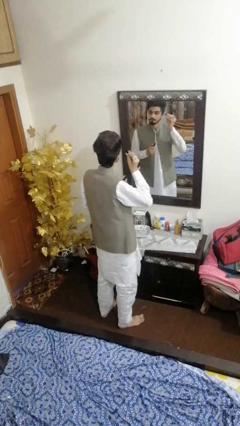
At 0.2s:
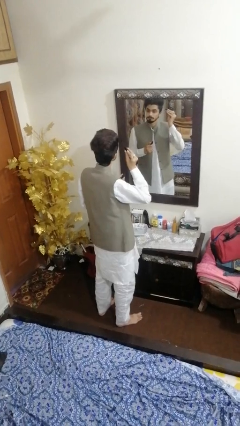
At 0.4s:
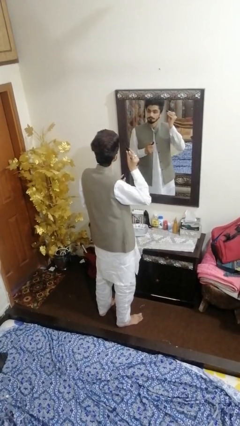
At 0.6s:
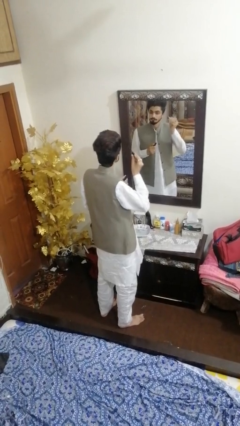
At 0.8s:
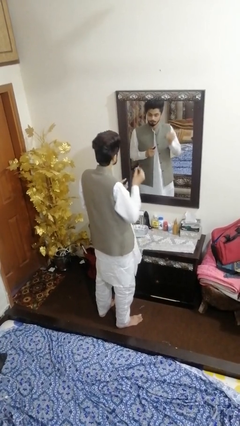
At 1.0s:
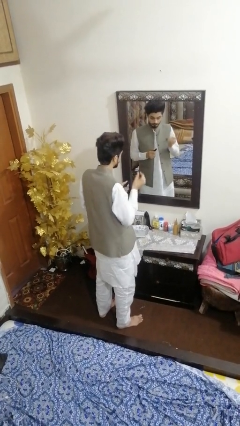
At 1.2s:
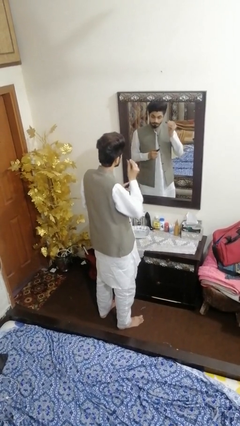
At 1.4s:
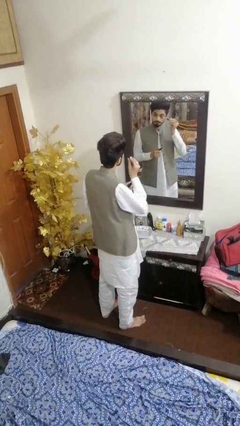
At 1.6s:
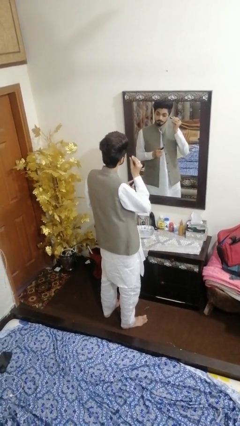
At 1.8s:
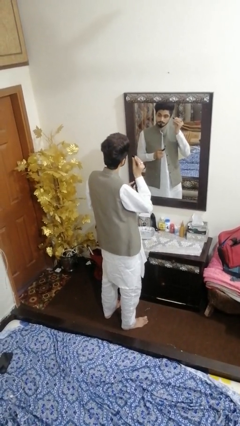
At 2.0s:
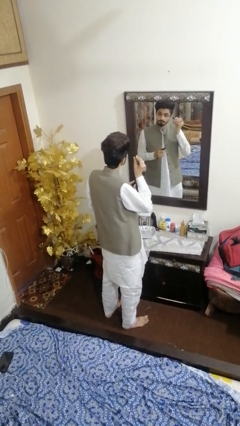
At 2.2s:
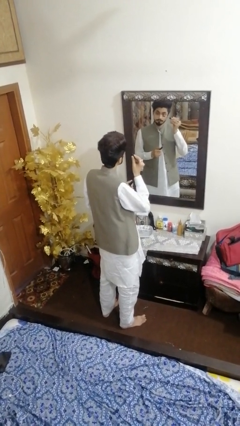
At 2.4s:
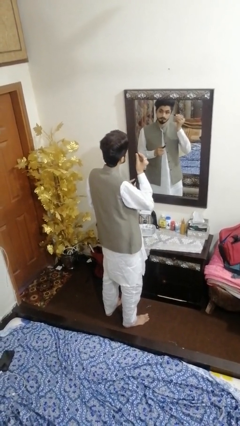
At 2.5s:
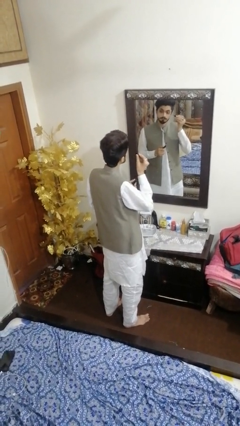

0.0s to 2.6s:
person applies eye makeup

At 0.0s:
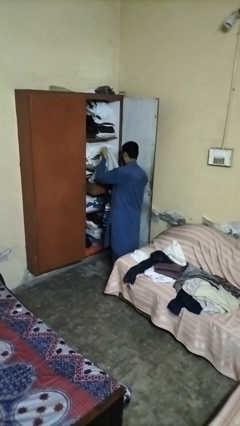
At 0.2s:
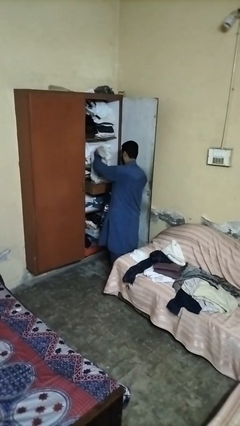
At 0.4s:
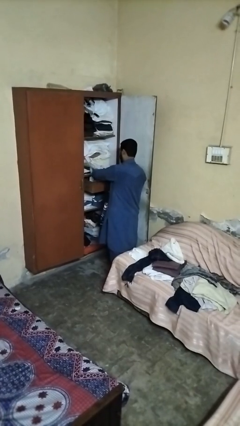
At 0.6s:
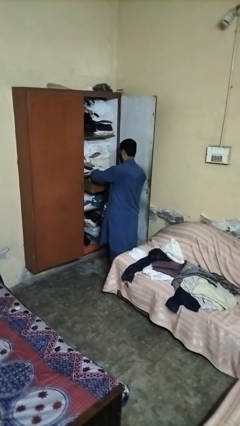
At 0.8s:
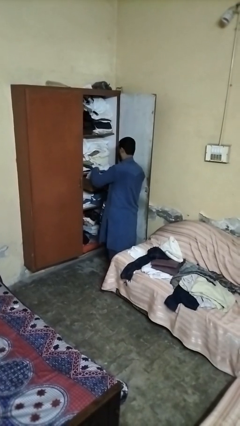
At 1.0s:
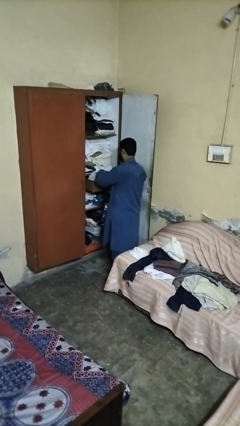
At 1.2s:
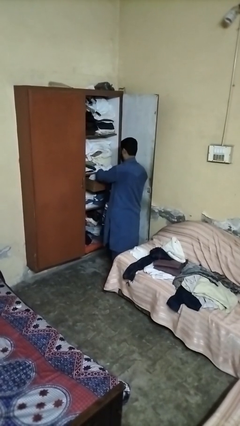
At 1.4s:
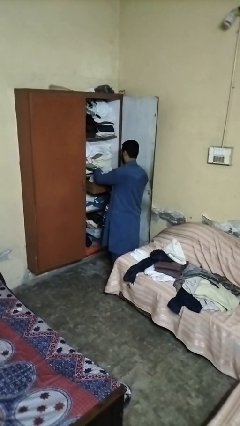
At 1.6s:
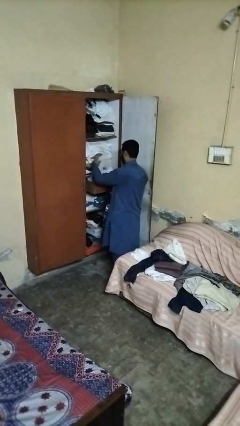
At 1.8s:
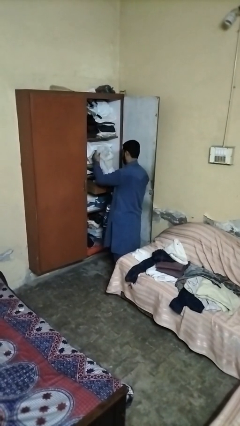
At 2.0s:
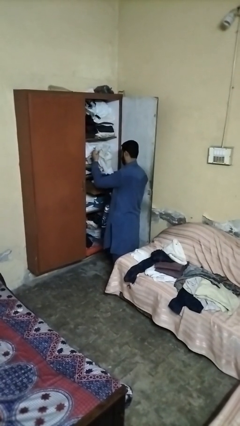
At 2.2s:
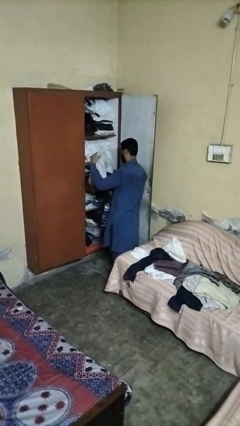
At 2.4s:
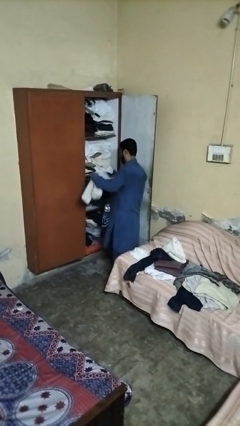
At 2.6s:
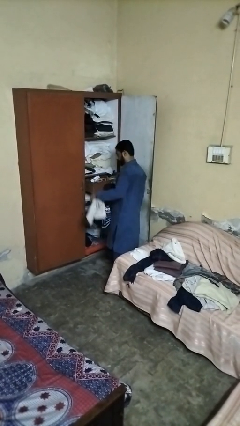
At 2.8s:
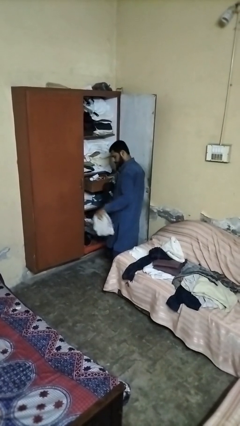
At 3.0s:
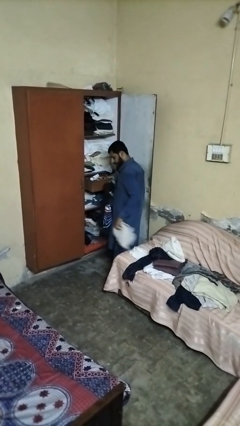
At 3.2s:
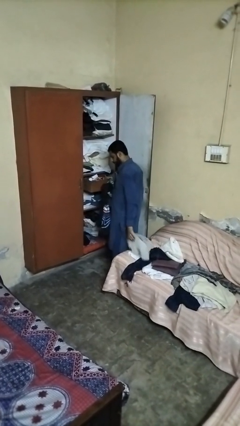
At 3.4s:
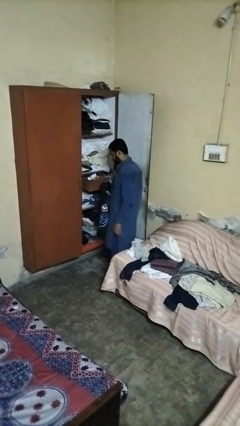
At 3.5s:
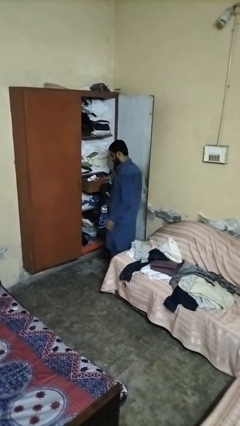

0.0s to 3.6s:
person takes clothes from dresser

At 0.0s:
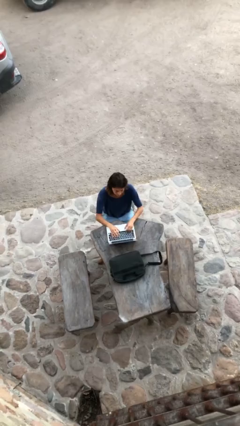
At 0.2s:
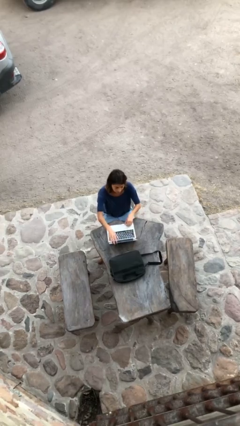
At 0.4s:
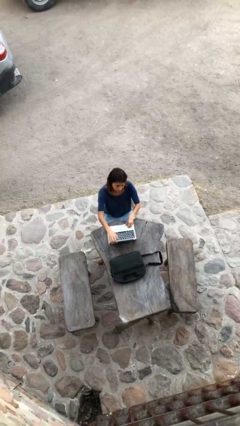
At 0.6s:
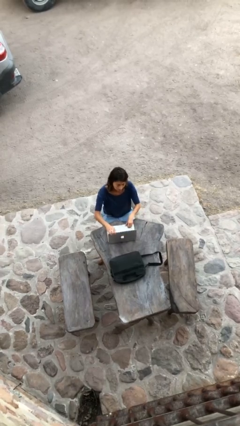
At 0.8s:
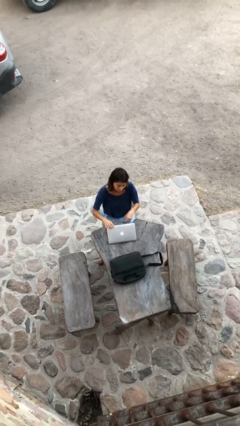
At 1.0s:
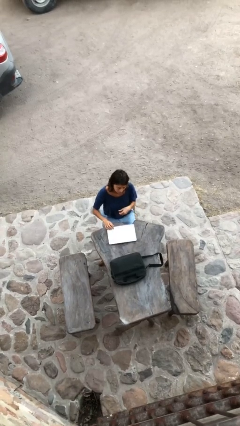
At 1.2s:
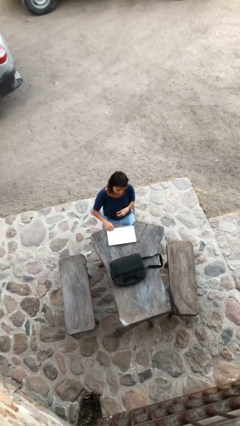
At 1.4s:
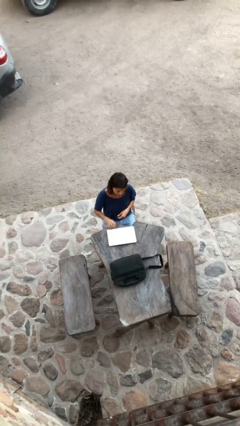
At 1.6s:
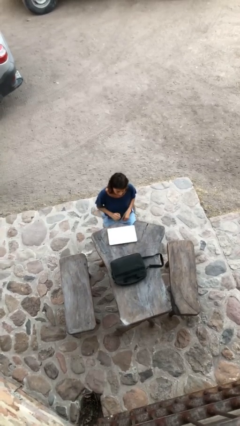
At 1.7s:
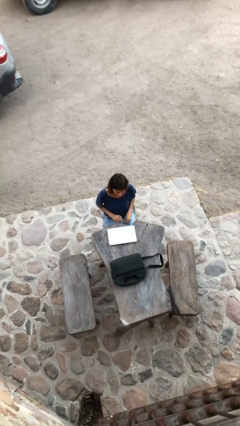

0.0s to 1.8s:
person interacts with laptop

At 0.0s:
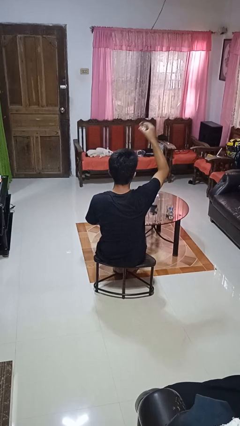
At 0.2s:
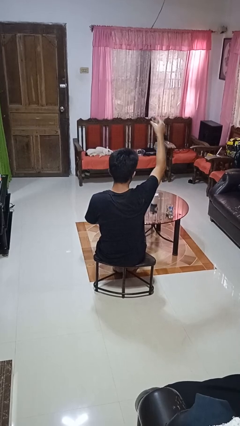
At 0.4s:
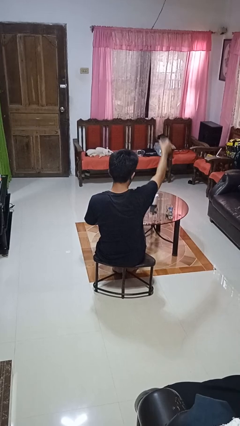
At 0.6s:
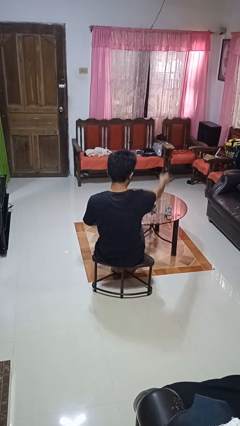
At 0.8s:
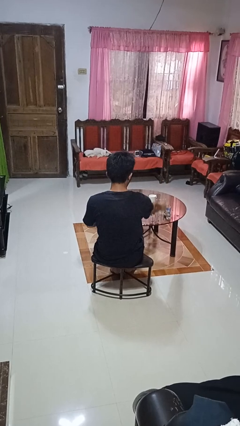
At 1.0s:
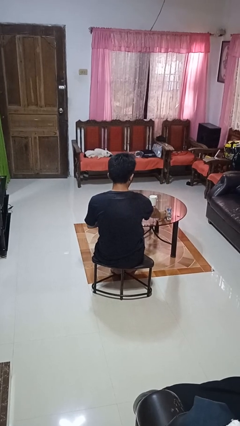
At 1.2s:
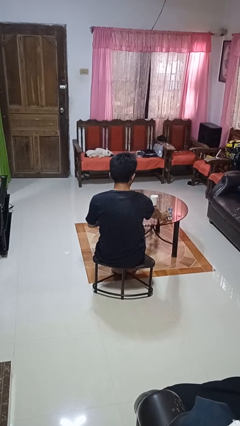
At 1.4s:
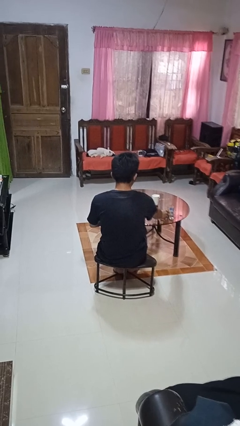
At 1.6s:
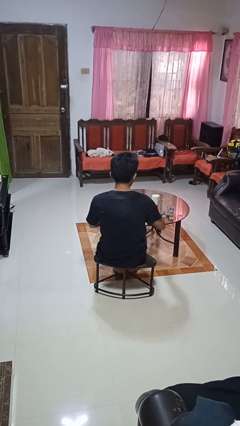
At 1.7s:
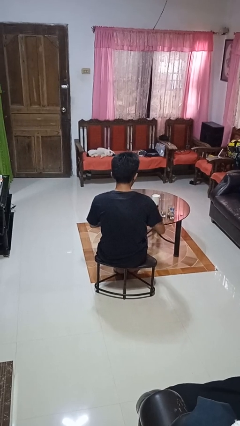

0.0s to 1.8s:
person puts down object on table

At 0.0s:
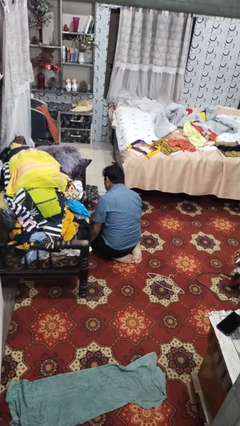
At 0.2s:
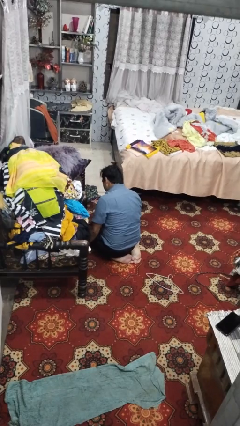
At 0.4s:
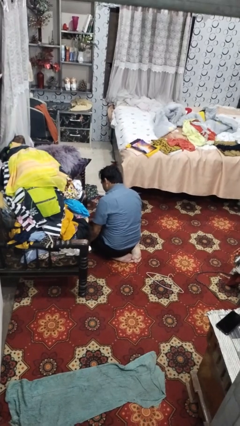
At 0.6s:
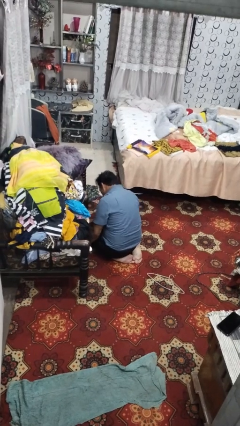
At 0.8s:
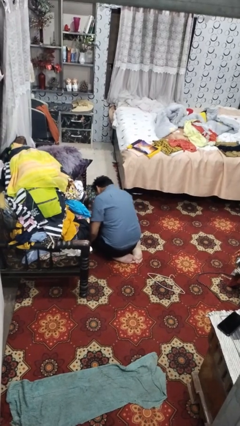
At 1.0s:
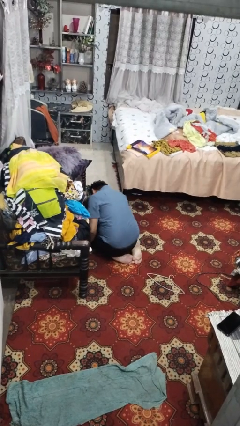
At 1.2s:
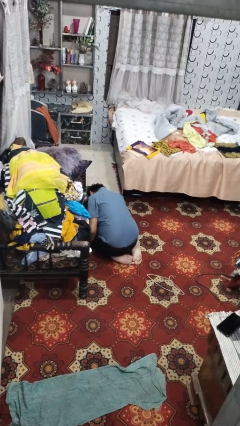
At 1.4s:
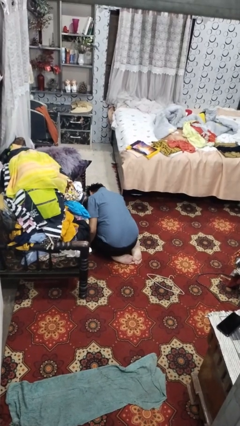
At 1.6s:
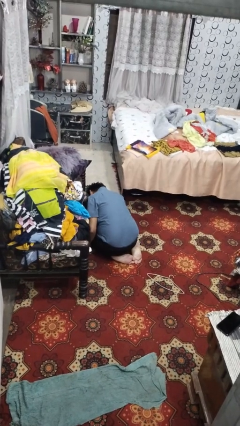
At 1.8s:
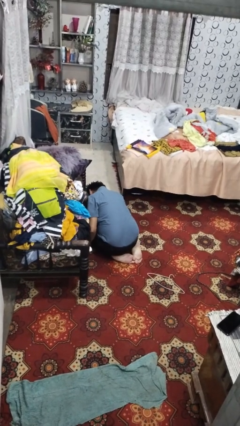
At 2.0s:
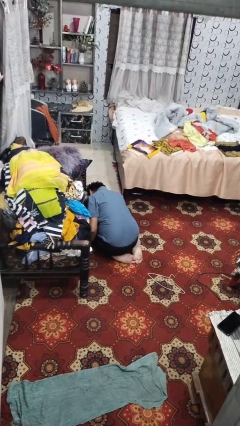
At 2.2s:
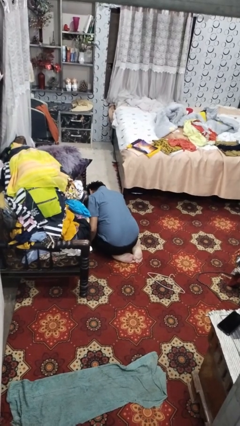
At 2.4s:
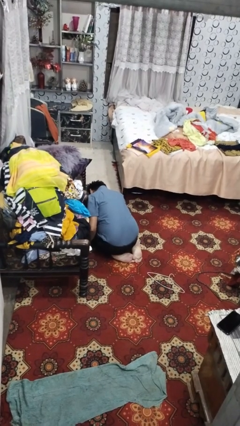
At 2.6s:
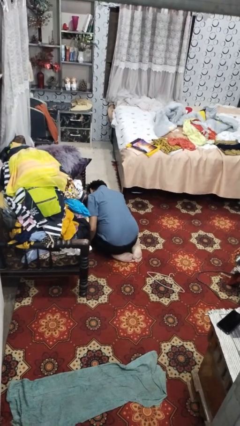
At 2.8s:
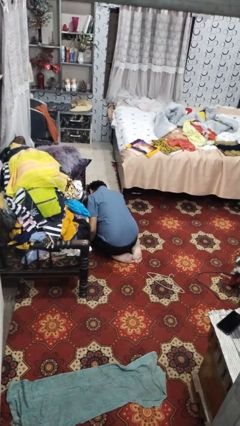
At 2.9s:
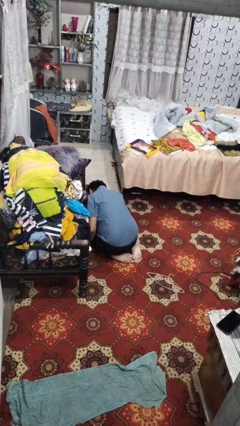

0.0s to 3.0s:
person searches under couch

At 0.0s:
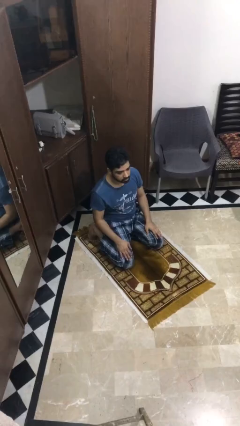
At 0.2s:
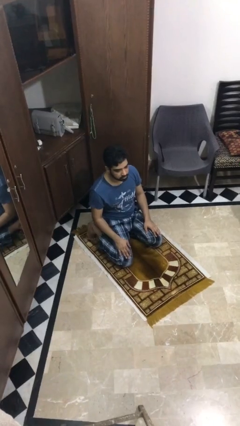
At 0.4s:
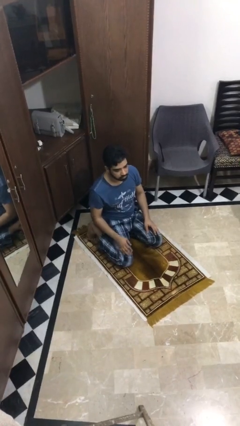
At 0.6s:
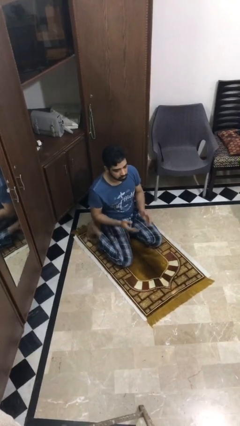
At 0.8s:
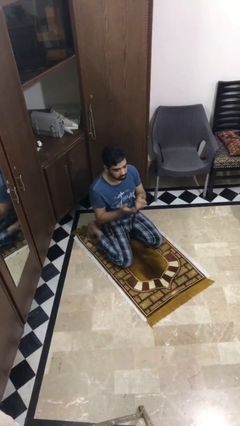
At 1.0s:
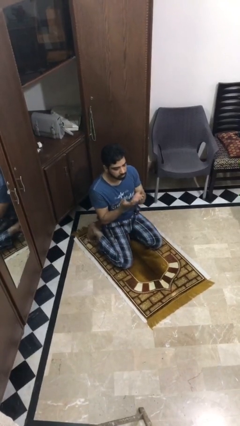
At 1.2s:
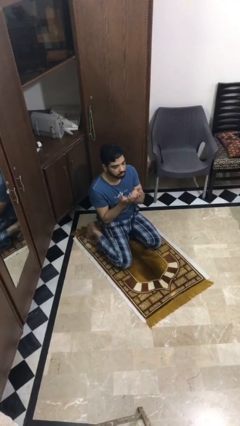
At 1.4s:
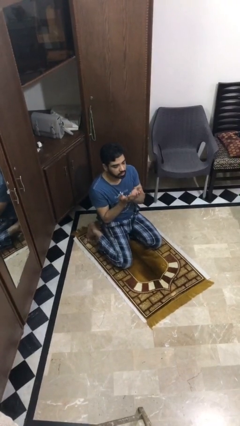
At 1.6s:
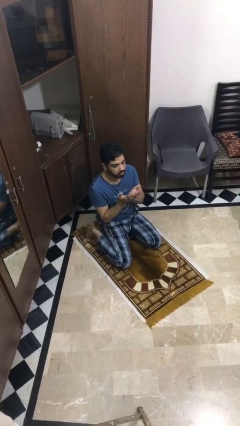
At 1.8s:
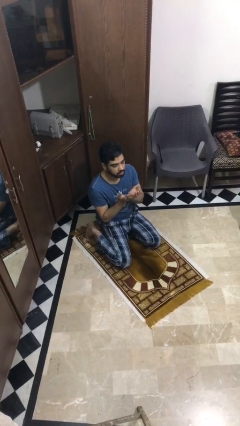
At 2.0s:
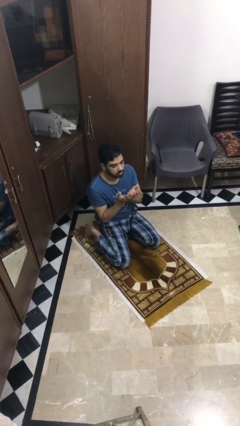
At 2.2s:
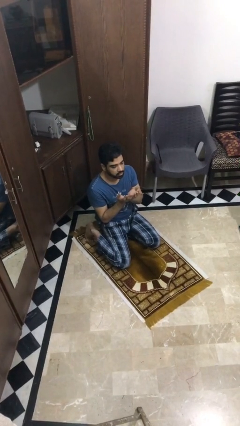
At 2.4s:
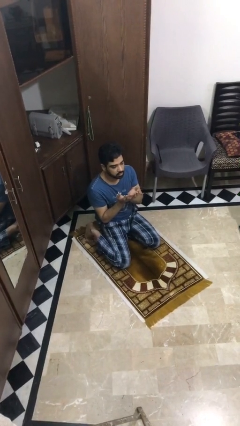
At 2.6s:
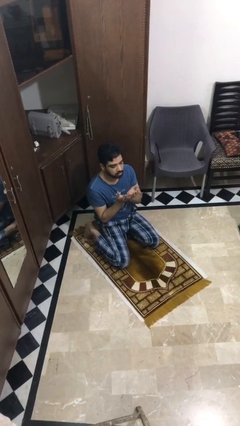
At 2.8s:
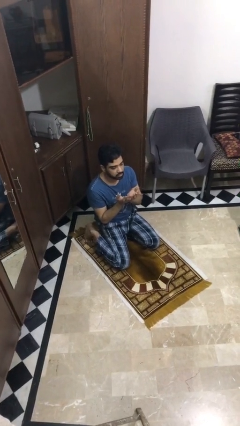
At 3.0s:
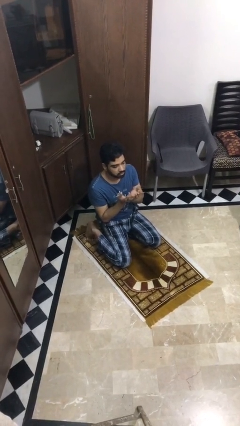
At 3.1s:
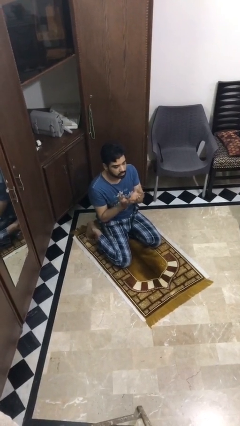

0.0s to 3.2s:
person prays

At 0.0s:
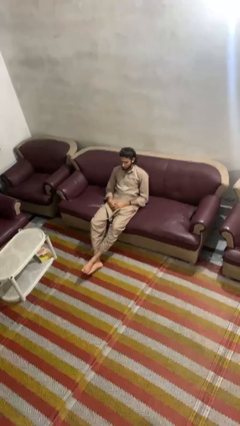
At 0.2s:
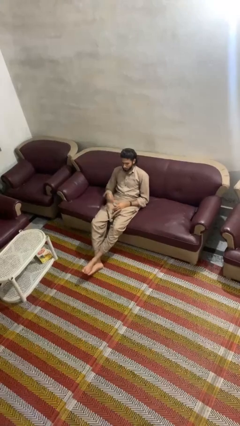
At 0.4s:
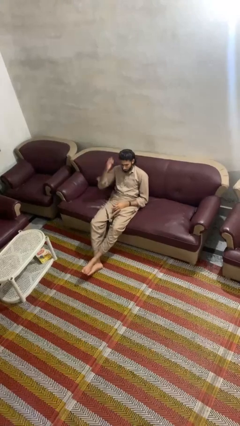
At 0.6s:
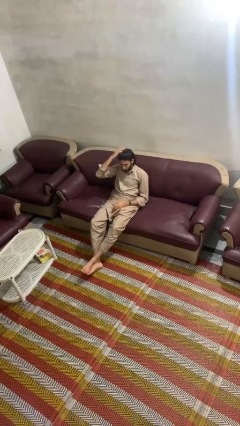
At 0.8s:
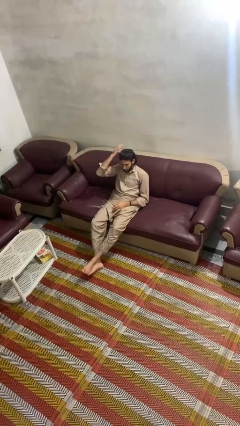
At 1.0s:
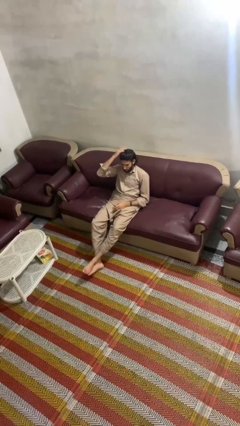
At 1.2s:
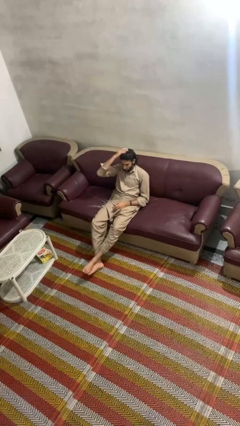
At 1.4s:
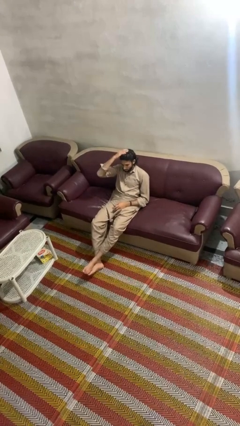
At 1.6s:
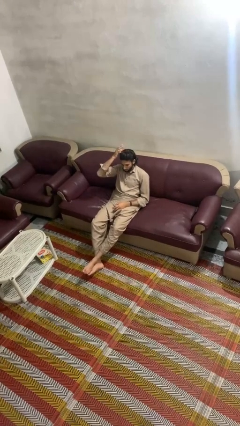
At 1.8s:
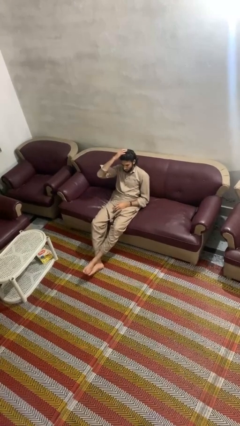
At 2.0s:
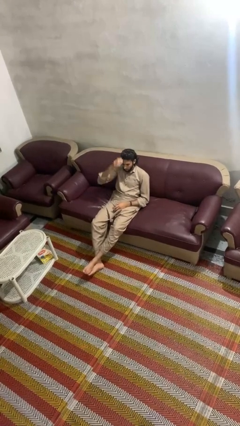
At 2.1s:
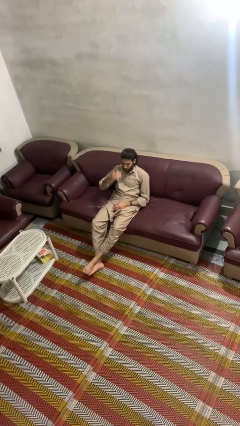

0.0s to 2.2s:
person pats head
